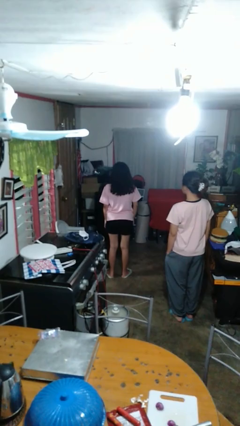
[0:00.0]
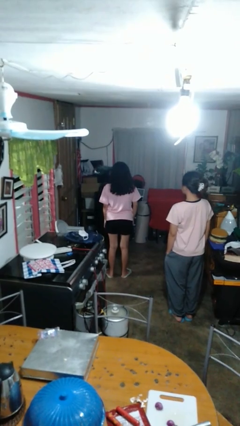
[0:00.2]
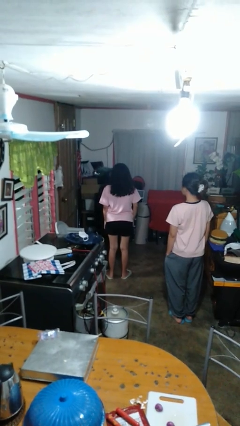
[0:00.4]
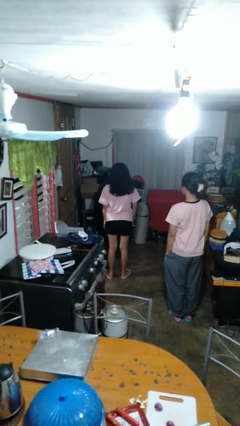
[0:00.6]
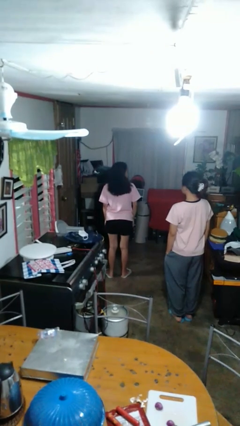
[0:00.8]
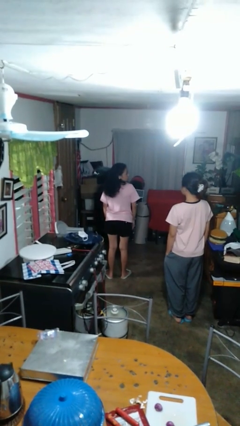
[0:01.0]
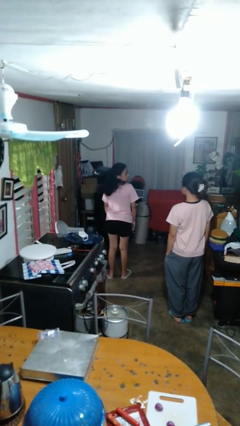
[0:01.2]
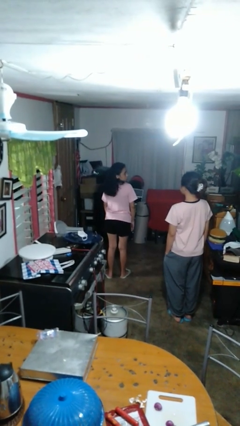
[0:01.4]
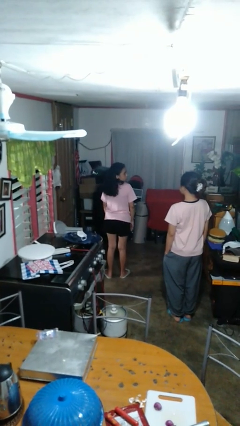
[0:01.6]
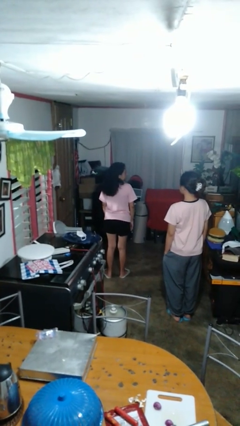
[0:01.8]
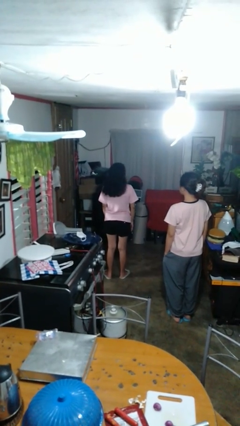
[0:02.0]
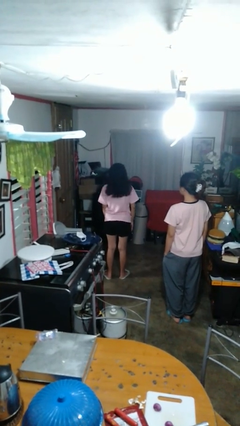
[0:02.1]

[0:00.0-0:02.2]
person looks over shoulder

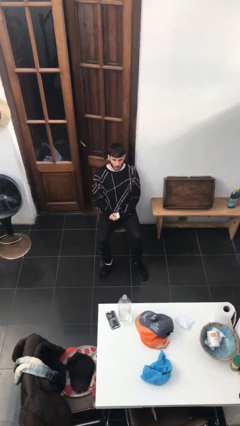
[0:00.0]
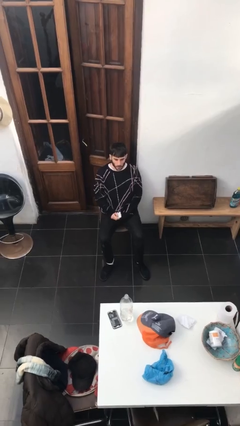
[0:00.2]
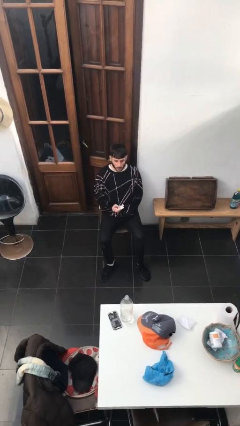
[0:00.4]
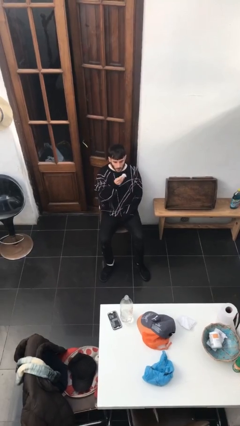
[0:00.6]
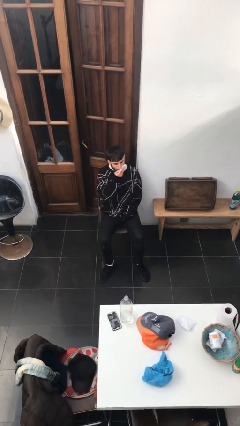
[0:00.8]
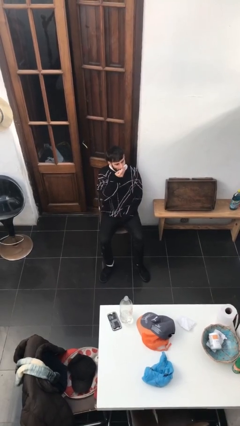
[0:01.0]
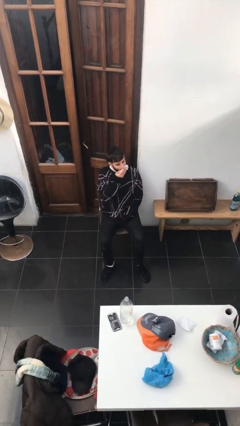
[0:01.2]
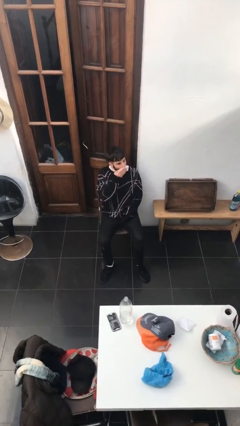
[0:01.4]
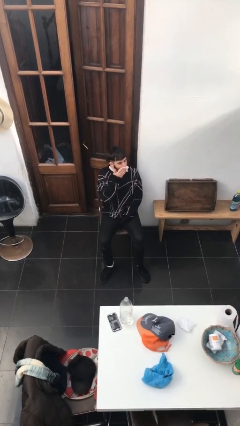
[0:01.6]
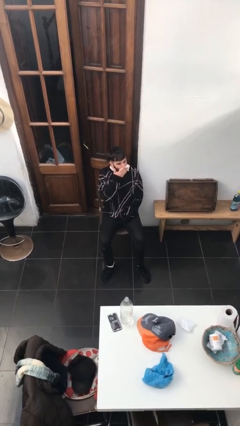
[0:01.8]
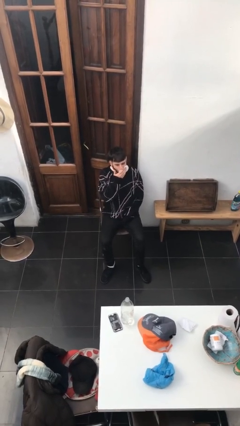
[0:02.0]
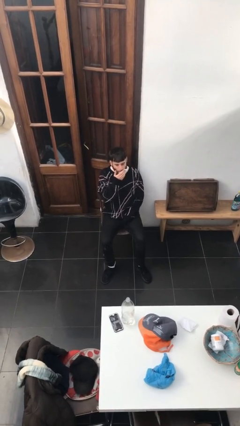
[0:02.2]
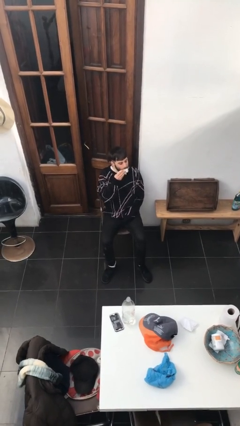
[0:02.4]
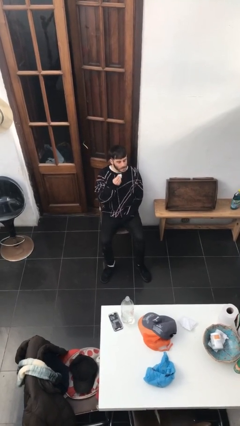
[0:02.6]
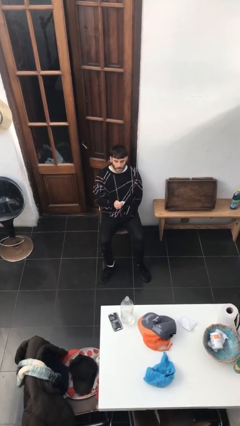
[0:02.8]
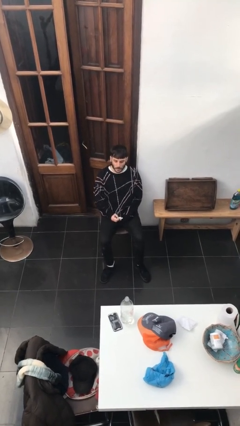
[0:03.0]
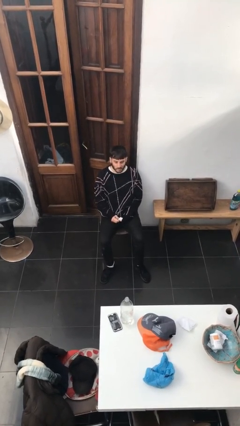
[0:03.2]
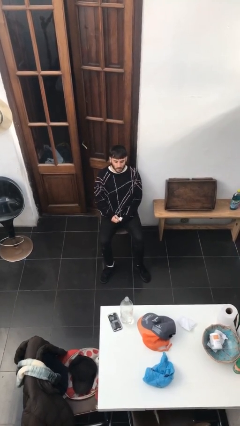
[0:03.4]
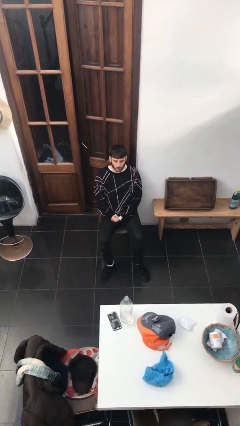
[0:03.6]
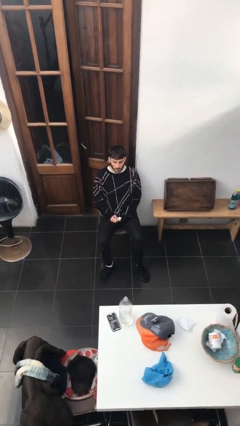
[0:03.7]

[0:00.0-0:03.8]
person wipes mouth with napkin

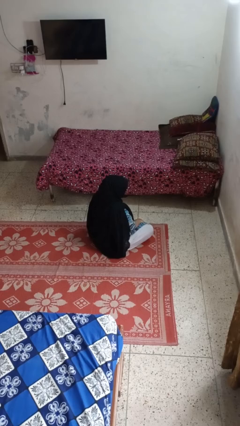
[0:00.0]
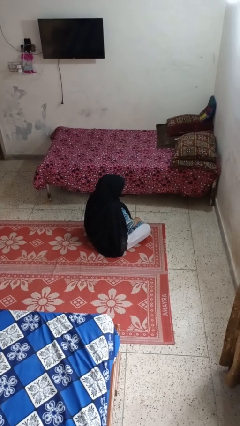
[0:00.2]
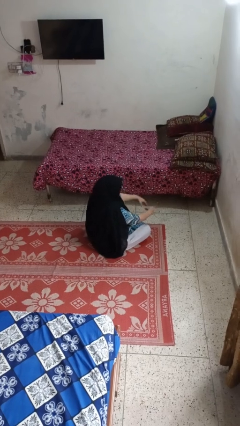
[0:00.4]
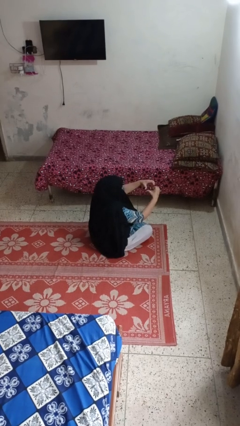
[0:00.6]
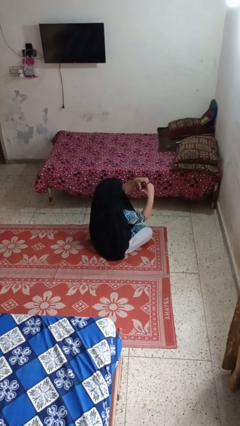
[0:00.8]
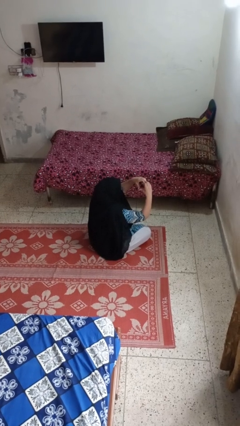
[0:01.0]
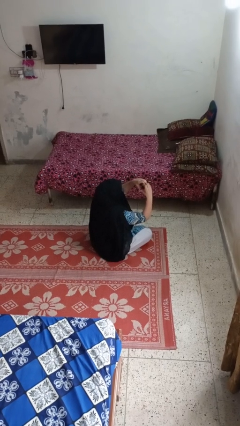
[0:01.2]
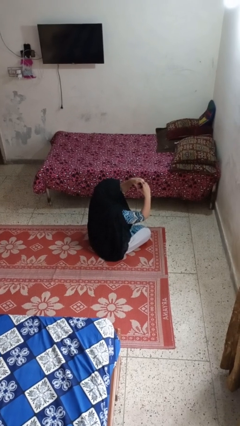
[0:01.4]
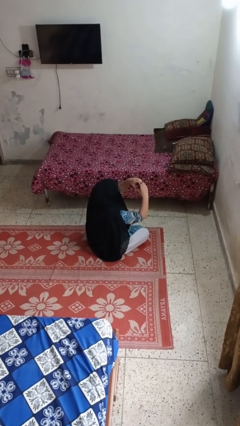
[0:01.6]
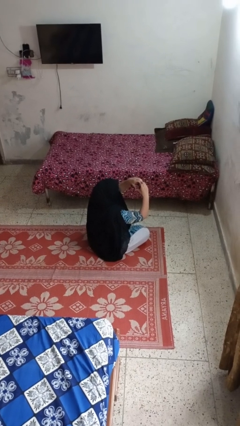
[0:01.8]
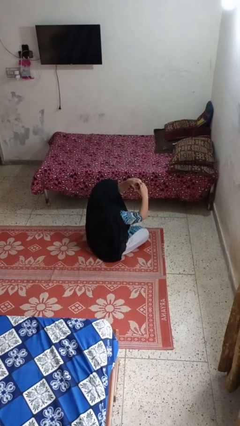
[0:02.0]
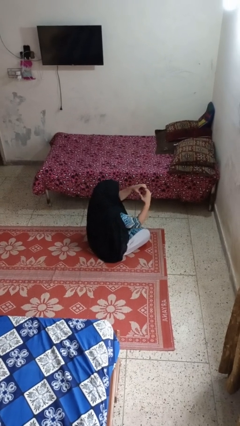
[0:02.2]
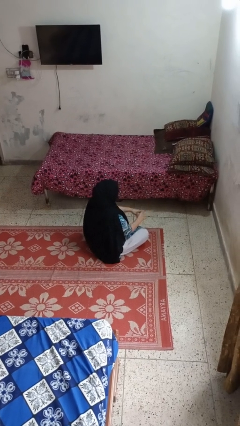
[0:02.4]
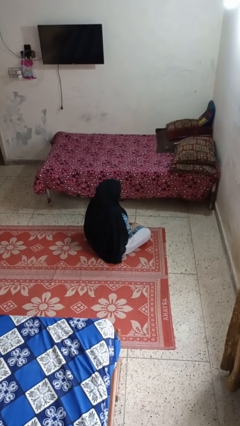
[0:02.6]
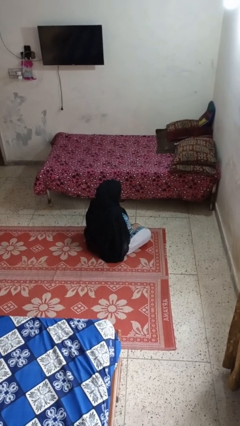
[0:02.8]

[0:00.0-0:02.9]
person gestures heart

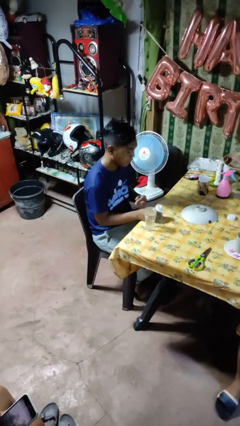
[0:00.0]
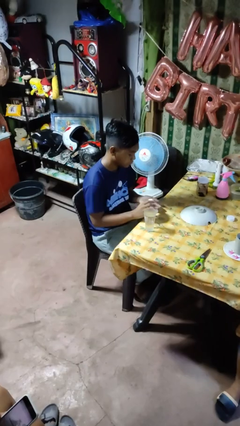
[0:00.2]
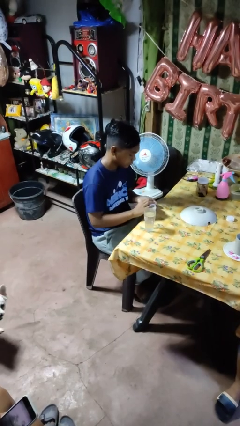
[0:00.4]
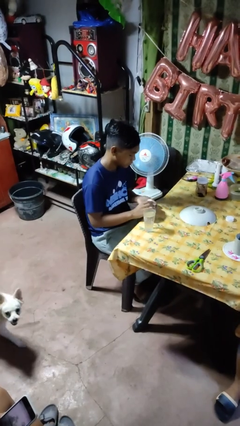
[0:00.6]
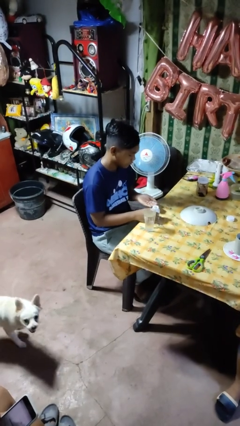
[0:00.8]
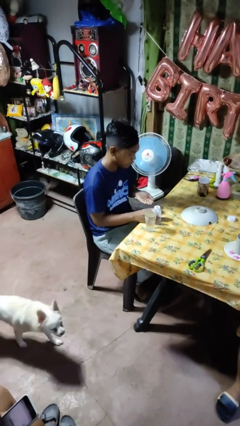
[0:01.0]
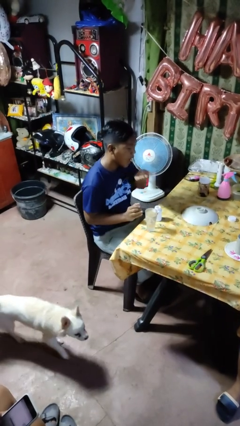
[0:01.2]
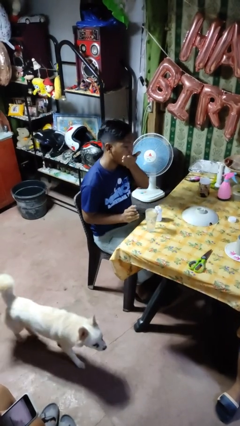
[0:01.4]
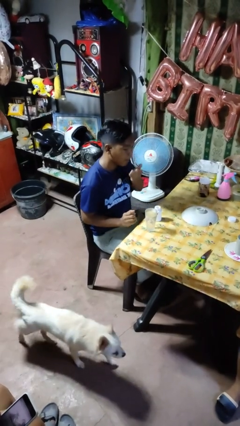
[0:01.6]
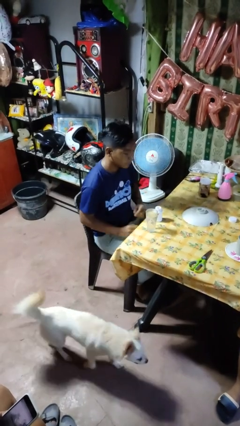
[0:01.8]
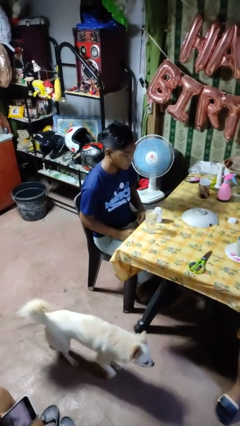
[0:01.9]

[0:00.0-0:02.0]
person takes medicine pills

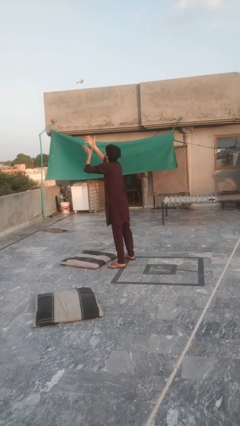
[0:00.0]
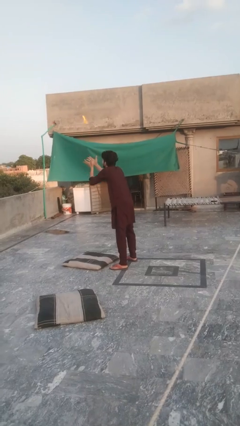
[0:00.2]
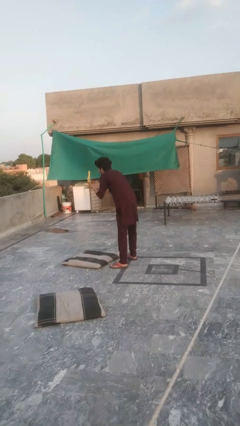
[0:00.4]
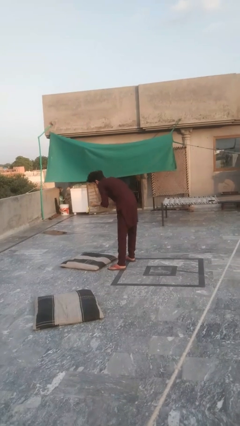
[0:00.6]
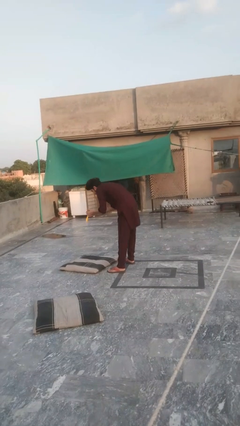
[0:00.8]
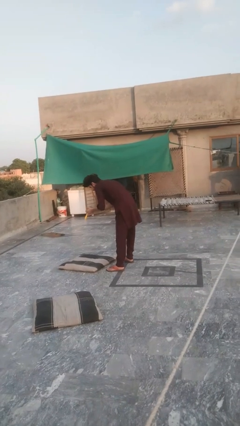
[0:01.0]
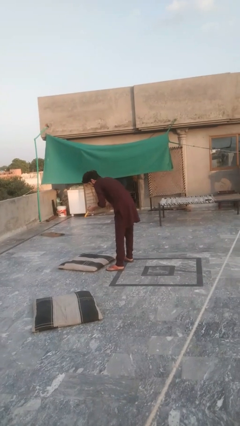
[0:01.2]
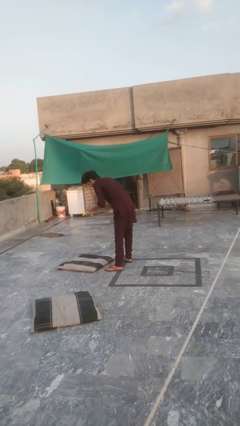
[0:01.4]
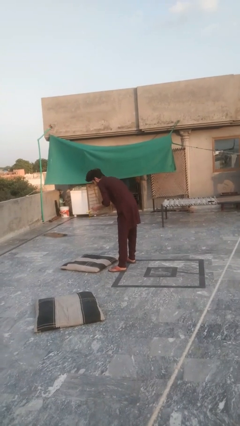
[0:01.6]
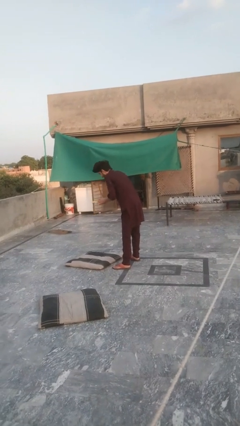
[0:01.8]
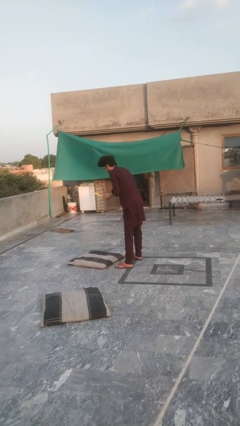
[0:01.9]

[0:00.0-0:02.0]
person catches dropped object

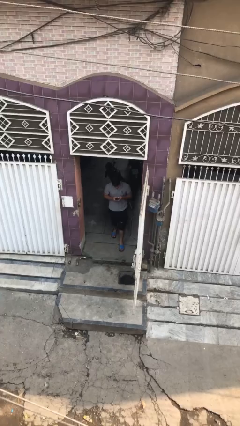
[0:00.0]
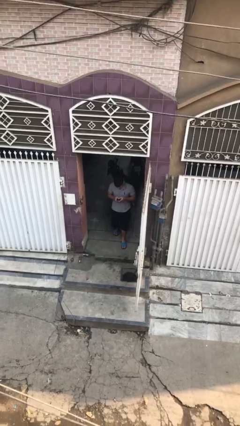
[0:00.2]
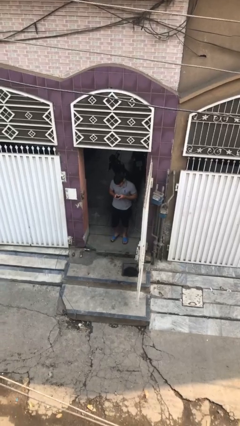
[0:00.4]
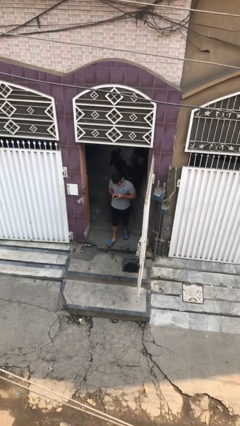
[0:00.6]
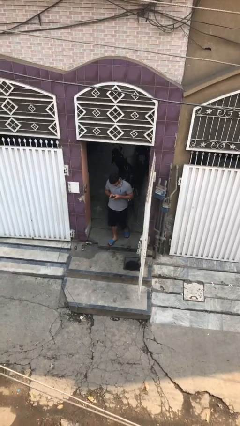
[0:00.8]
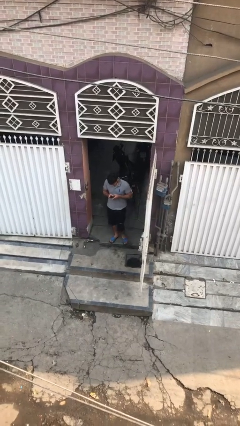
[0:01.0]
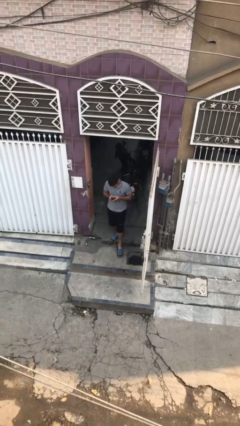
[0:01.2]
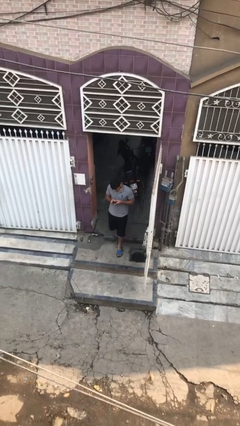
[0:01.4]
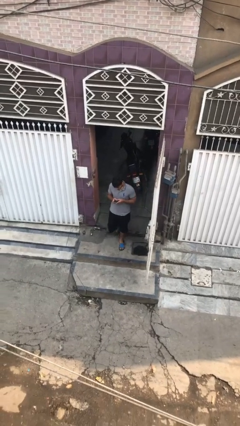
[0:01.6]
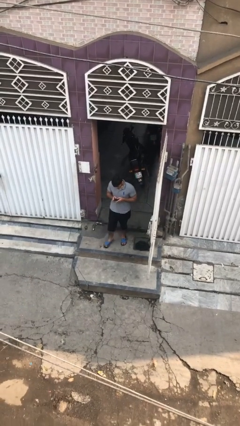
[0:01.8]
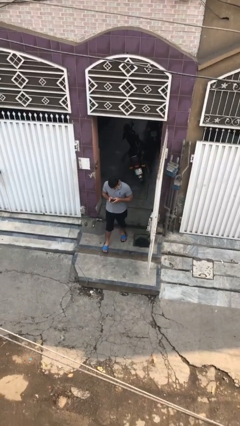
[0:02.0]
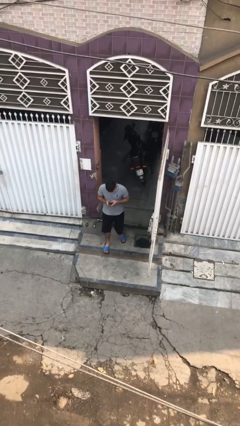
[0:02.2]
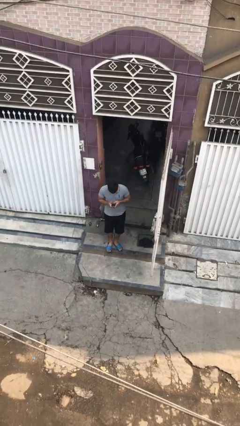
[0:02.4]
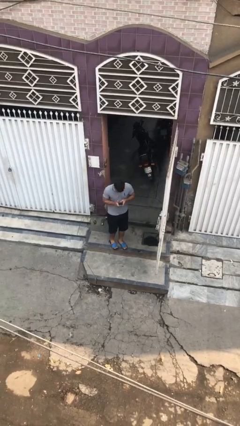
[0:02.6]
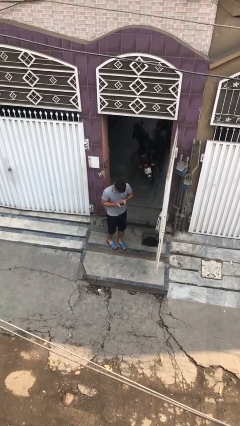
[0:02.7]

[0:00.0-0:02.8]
person enters scene through structure

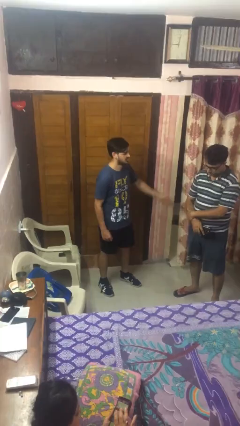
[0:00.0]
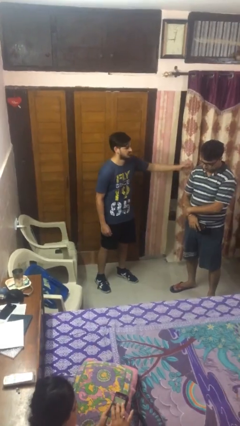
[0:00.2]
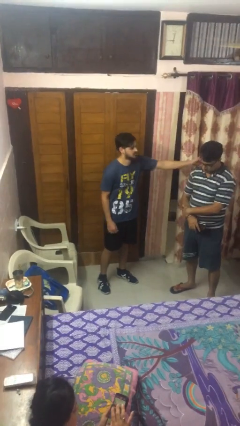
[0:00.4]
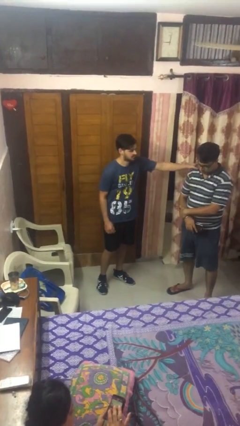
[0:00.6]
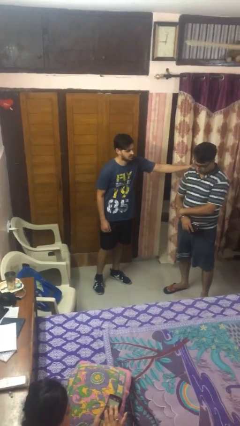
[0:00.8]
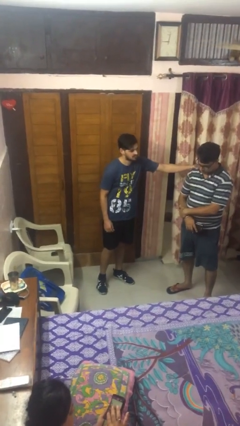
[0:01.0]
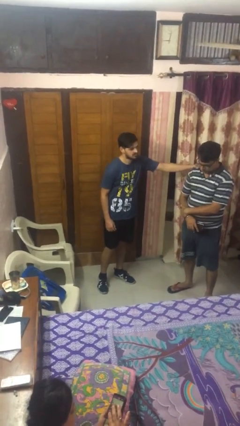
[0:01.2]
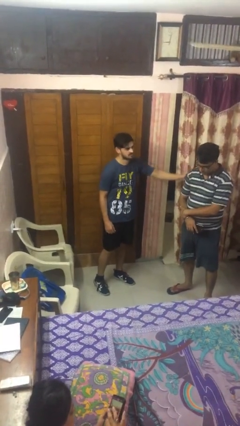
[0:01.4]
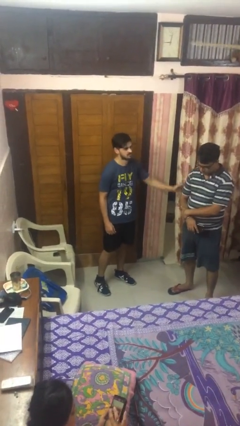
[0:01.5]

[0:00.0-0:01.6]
person pounds shoulders of person
